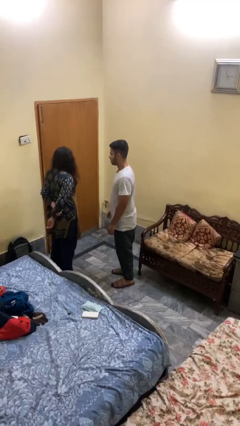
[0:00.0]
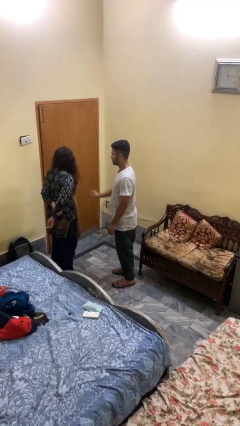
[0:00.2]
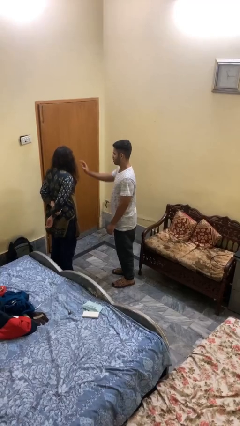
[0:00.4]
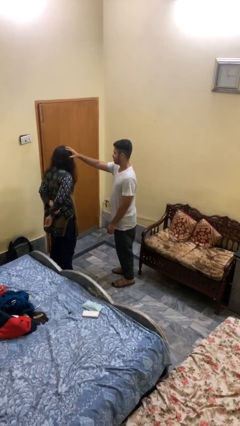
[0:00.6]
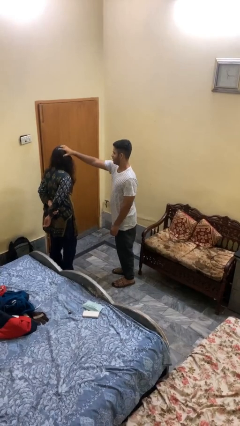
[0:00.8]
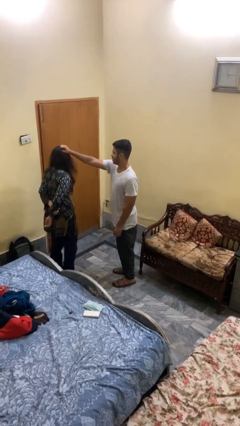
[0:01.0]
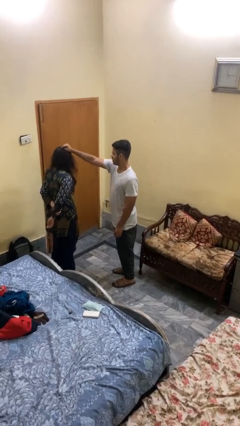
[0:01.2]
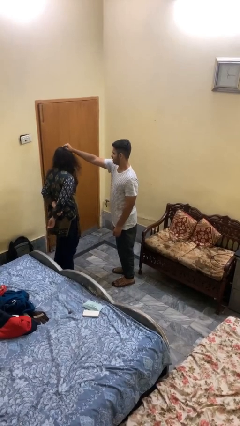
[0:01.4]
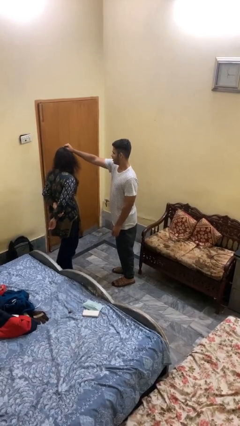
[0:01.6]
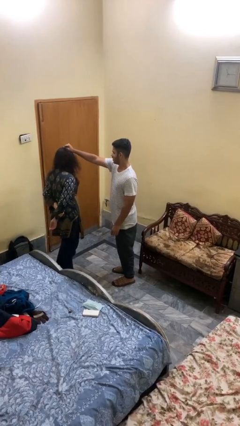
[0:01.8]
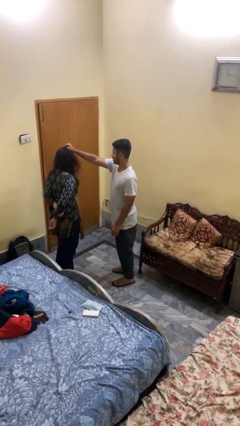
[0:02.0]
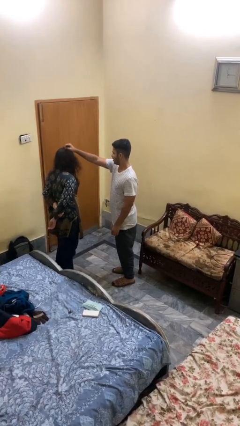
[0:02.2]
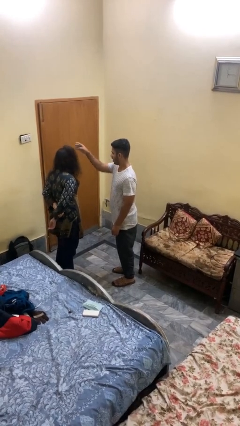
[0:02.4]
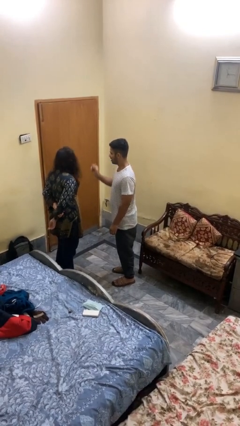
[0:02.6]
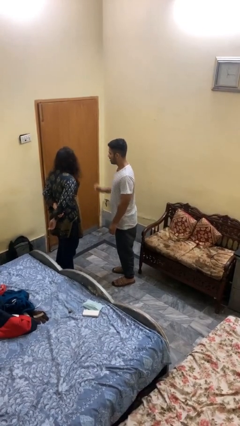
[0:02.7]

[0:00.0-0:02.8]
person grabs person by hair

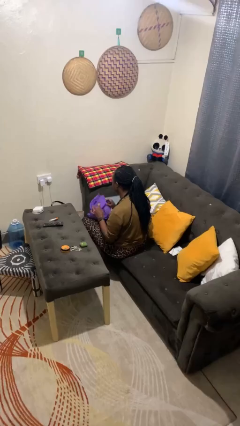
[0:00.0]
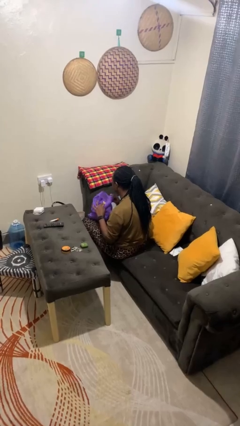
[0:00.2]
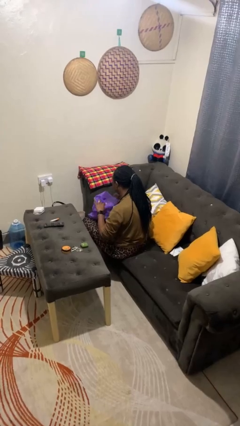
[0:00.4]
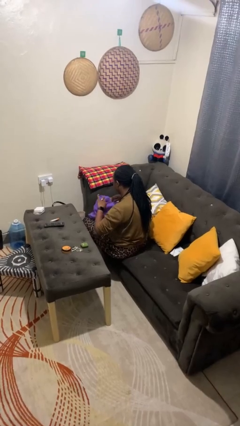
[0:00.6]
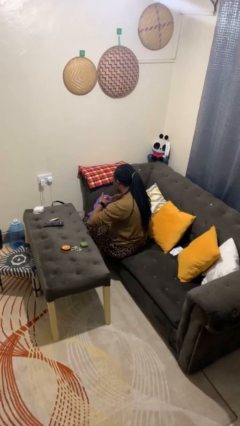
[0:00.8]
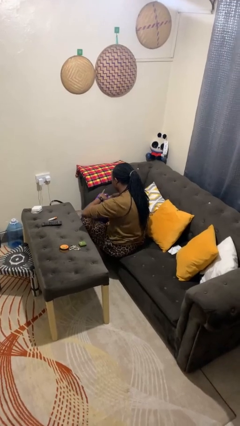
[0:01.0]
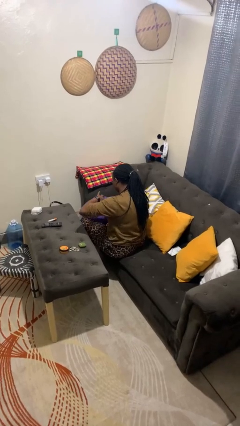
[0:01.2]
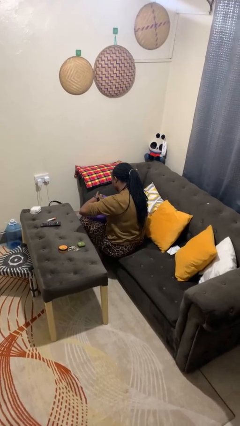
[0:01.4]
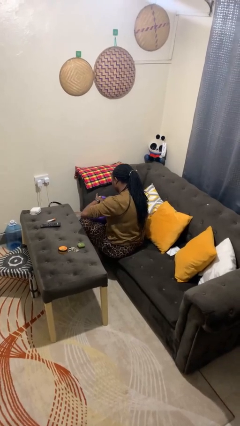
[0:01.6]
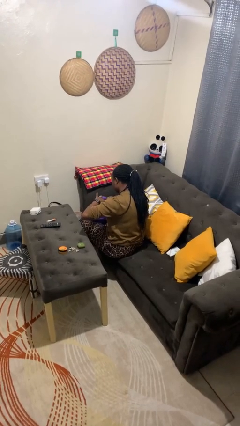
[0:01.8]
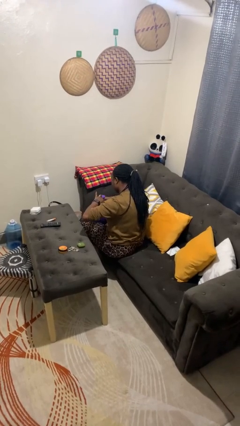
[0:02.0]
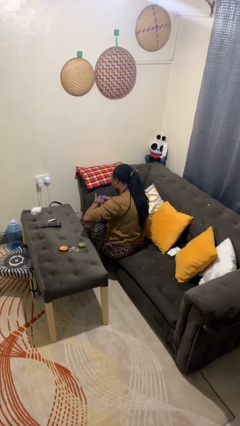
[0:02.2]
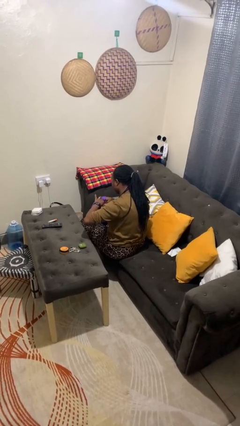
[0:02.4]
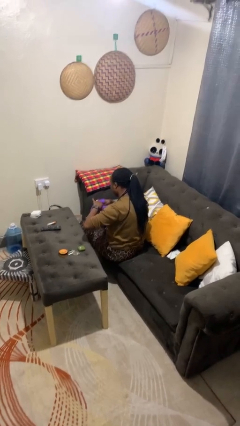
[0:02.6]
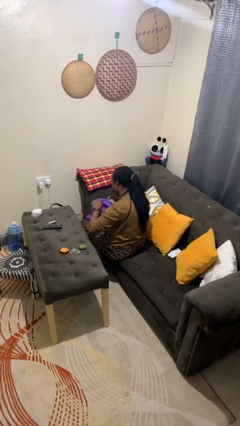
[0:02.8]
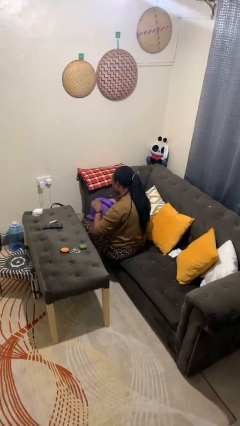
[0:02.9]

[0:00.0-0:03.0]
person searches in bag

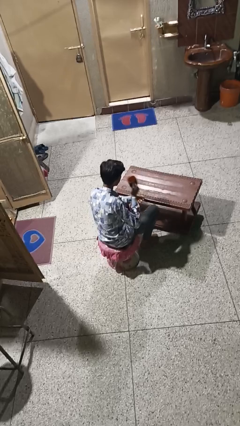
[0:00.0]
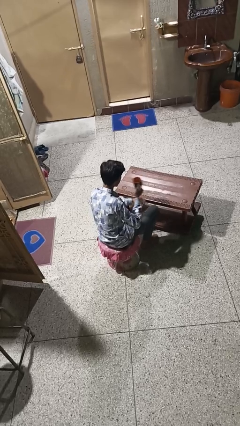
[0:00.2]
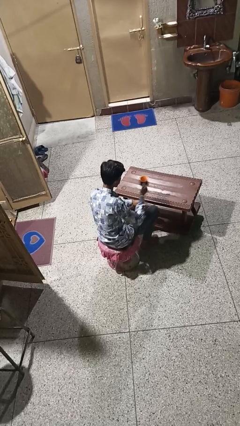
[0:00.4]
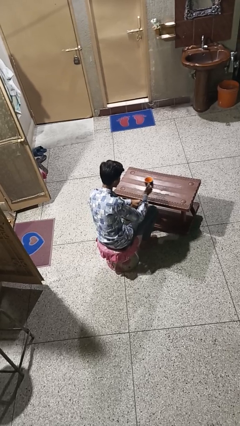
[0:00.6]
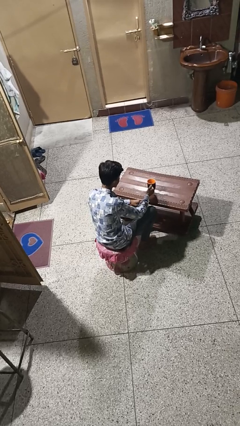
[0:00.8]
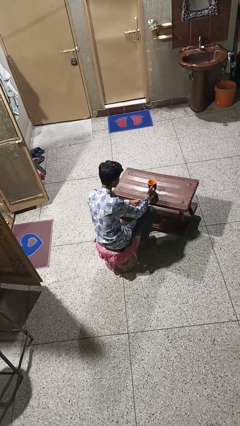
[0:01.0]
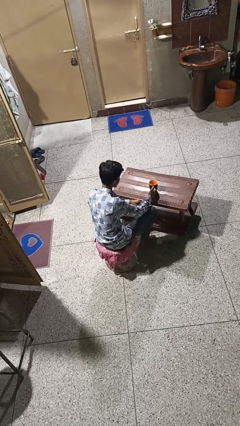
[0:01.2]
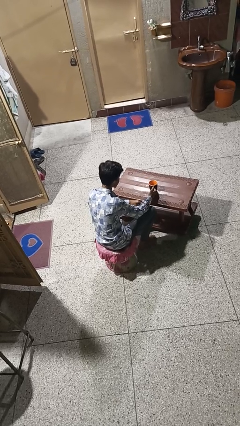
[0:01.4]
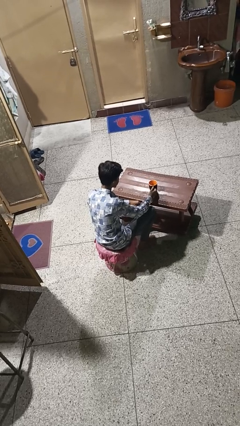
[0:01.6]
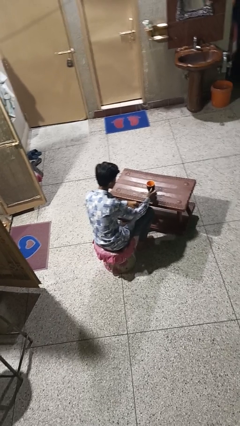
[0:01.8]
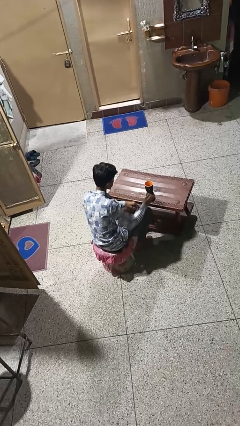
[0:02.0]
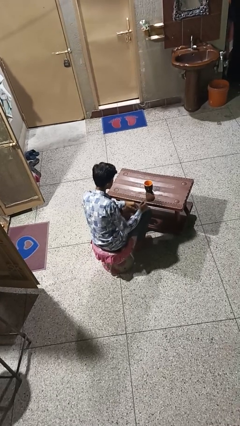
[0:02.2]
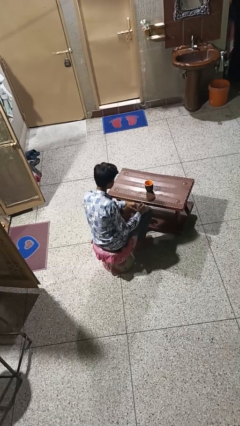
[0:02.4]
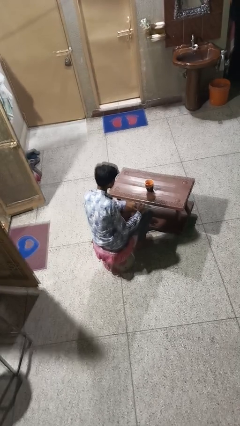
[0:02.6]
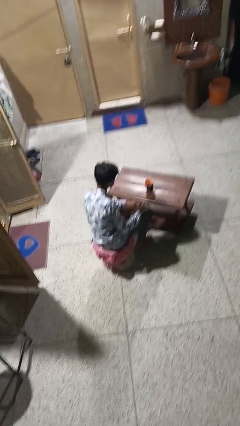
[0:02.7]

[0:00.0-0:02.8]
person puts down object on table

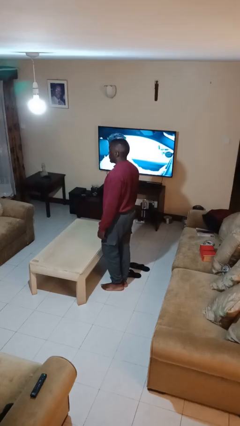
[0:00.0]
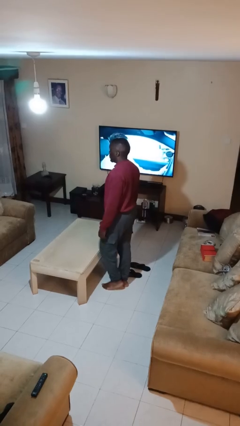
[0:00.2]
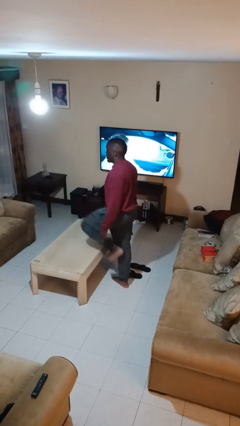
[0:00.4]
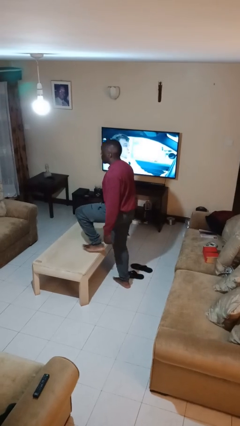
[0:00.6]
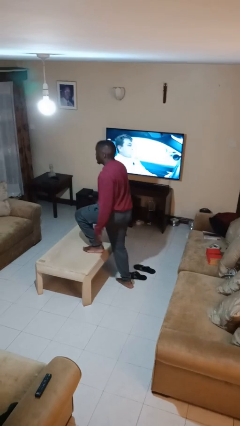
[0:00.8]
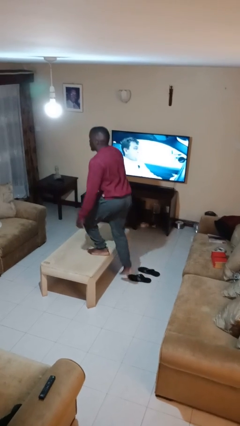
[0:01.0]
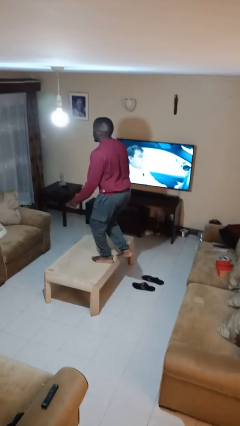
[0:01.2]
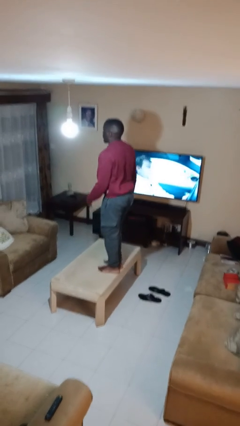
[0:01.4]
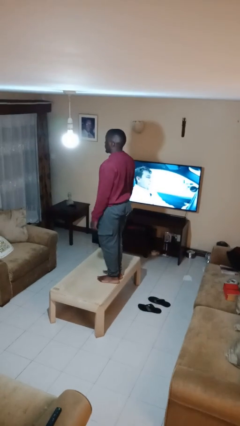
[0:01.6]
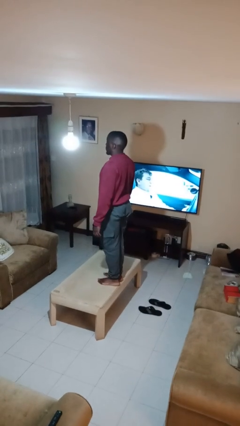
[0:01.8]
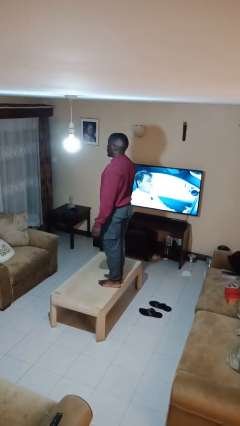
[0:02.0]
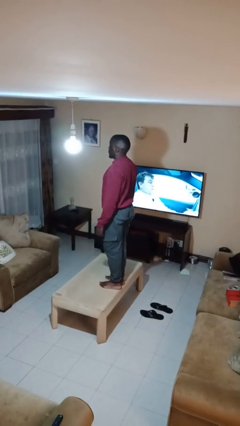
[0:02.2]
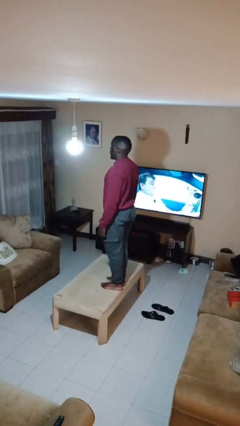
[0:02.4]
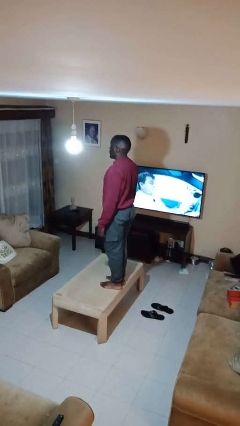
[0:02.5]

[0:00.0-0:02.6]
person climbs on table

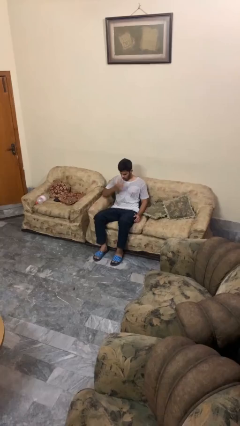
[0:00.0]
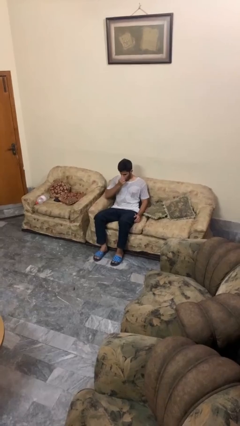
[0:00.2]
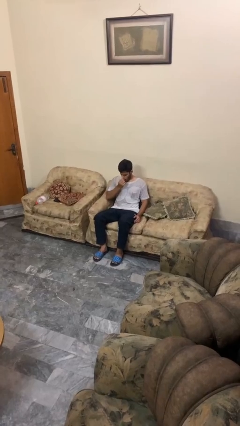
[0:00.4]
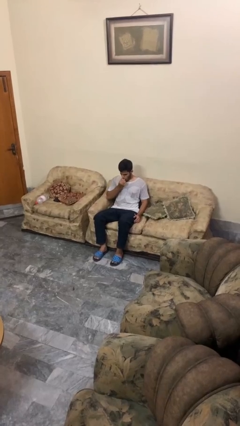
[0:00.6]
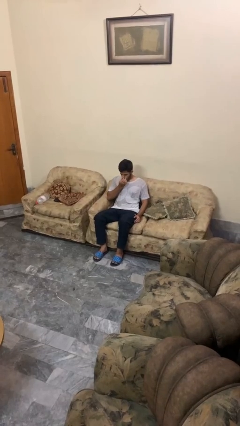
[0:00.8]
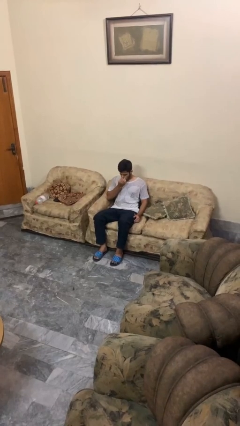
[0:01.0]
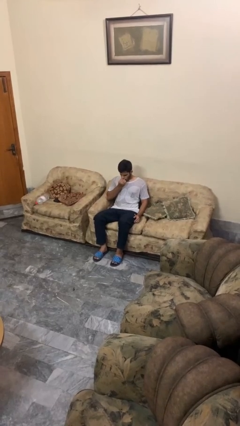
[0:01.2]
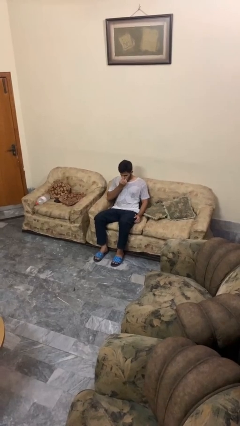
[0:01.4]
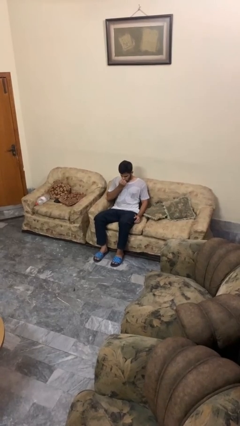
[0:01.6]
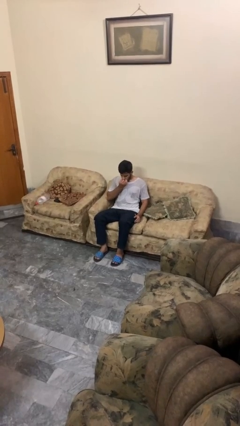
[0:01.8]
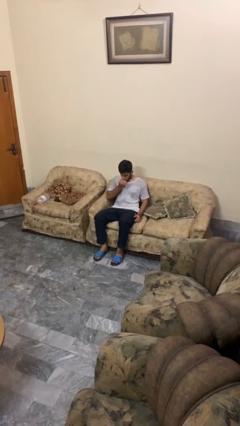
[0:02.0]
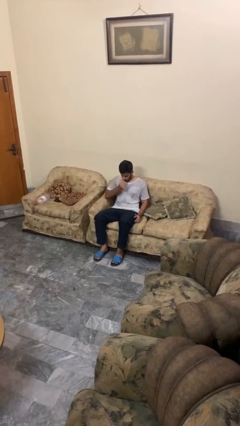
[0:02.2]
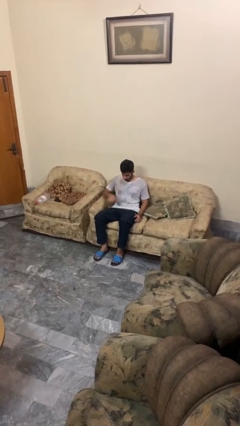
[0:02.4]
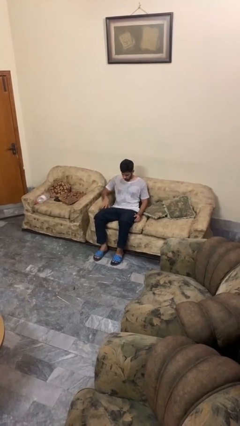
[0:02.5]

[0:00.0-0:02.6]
person scratches face

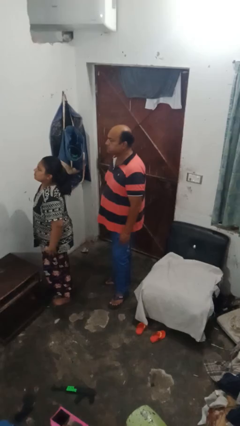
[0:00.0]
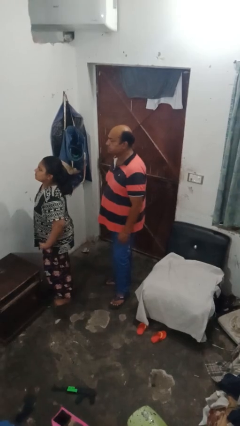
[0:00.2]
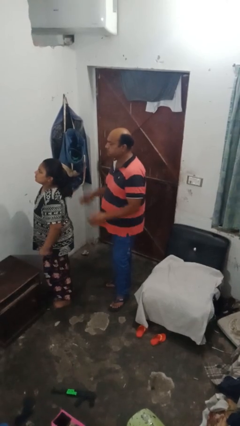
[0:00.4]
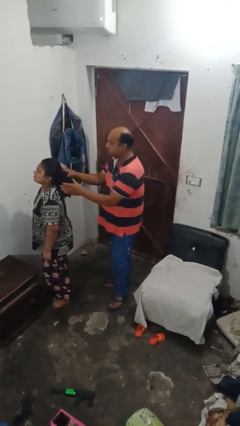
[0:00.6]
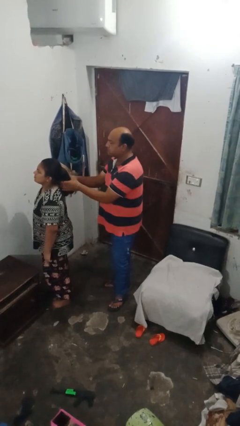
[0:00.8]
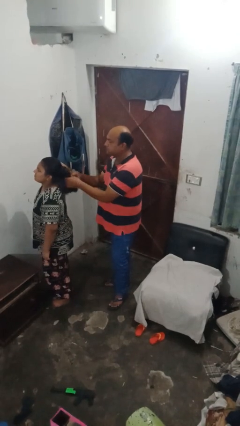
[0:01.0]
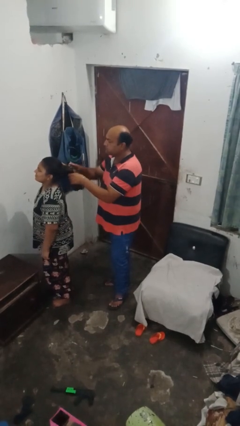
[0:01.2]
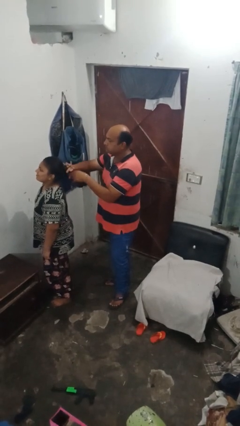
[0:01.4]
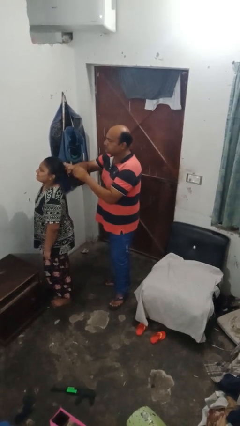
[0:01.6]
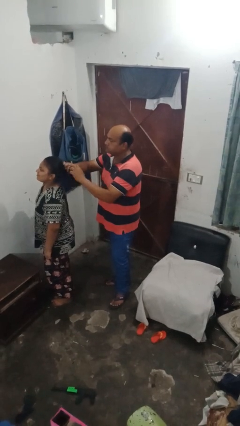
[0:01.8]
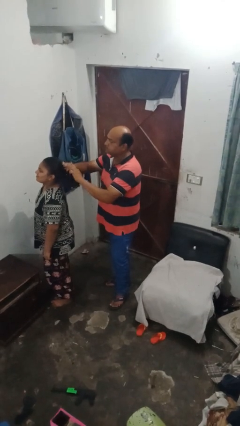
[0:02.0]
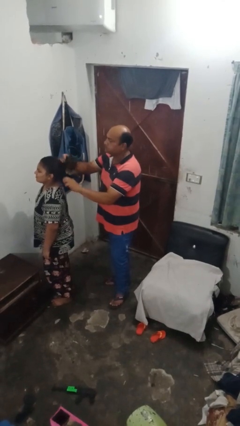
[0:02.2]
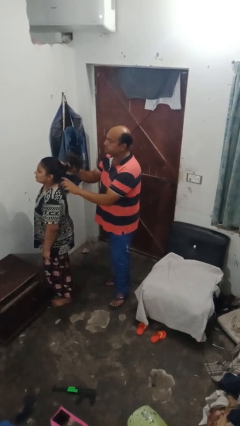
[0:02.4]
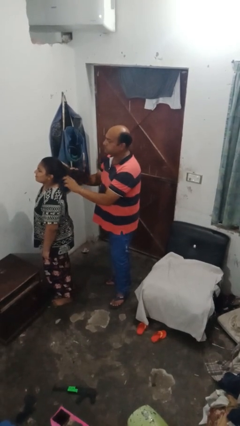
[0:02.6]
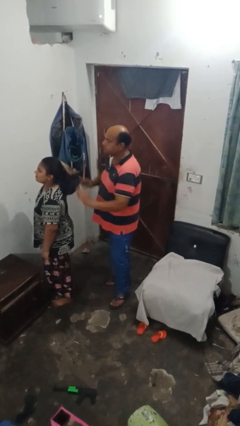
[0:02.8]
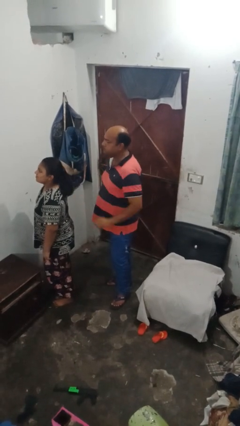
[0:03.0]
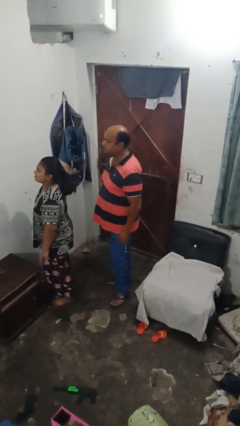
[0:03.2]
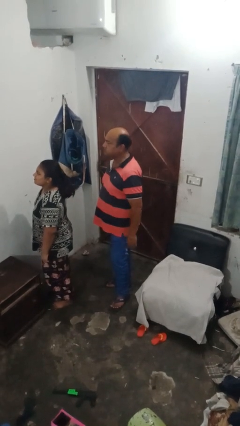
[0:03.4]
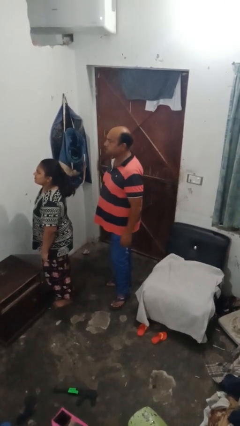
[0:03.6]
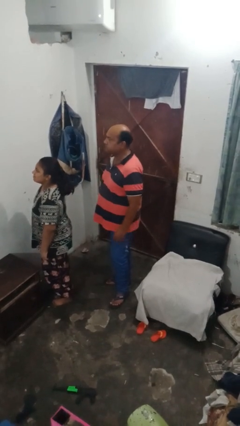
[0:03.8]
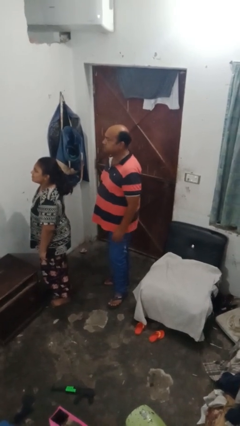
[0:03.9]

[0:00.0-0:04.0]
person braids hair of person
